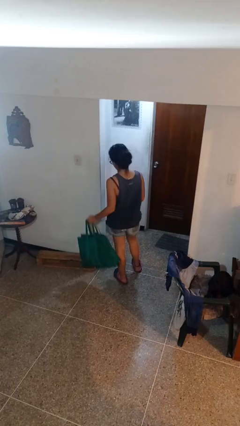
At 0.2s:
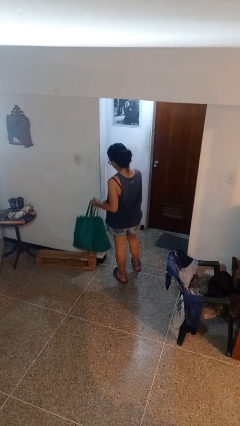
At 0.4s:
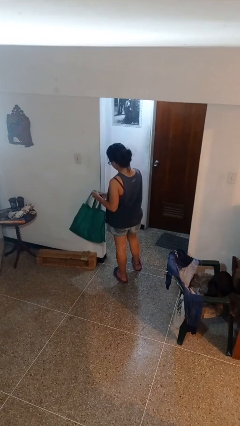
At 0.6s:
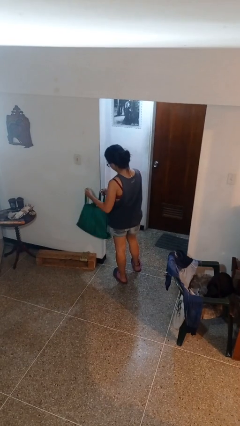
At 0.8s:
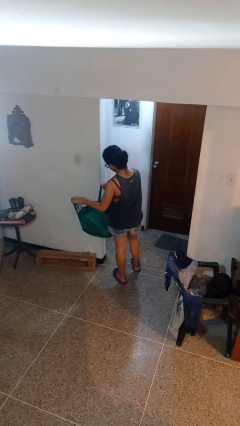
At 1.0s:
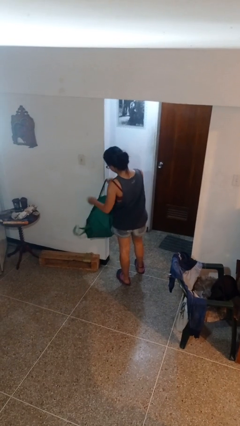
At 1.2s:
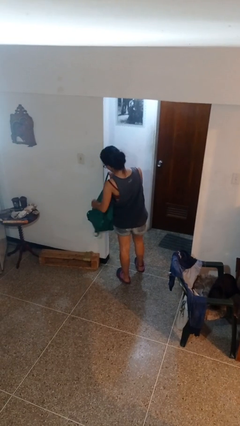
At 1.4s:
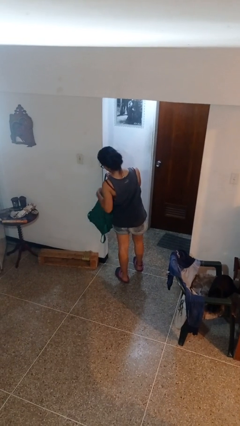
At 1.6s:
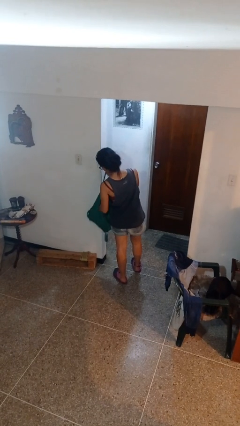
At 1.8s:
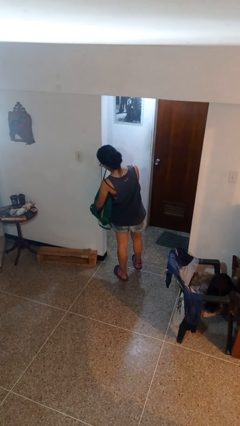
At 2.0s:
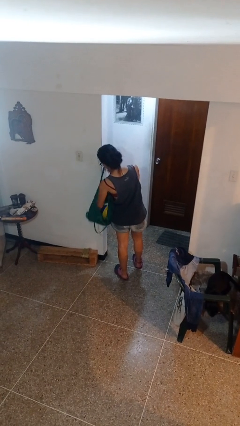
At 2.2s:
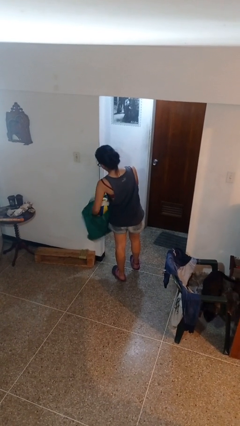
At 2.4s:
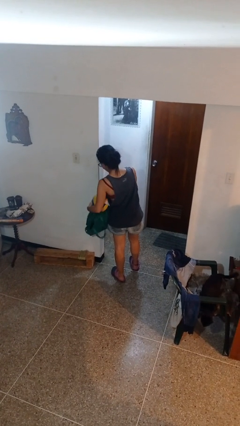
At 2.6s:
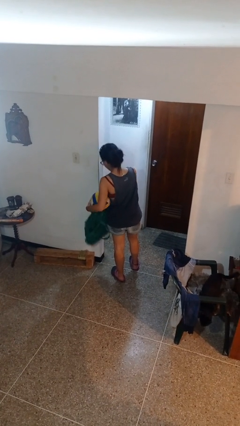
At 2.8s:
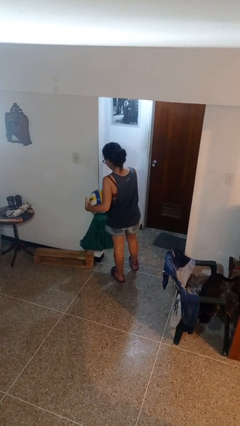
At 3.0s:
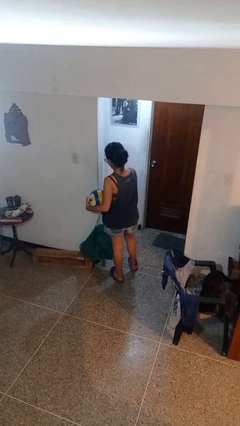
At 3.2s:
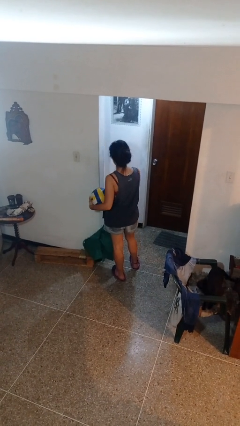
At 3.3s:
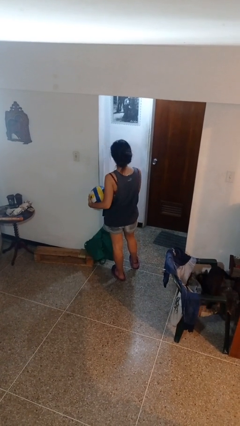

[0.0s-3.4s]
person takes object from bag

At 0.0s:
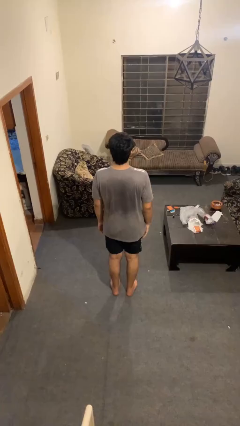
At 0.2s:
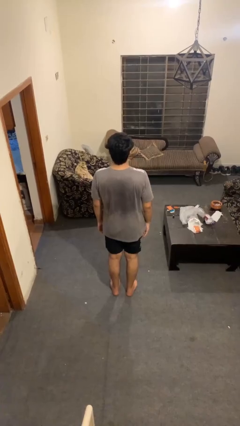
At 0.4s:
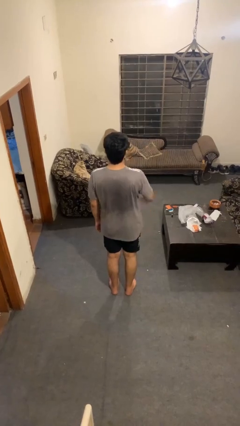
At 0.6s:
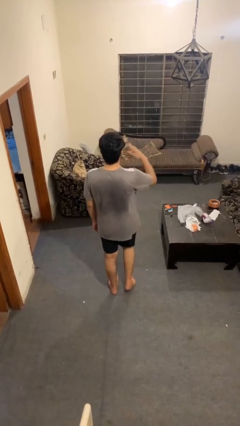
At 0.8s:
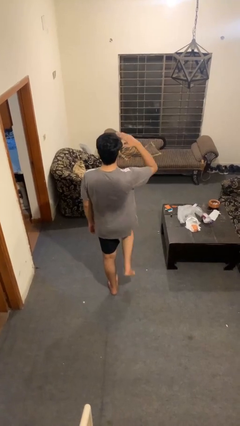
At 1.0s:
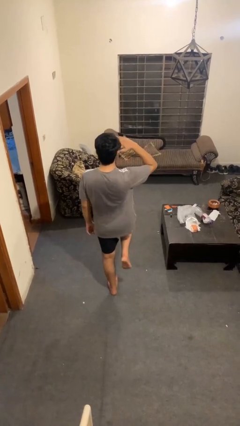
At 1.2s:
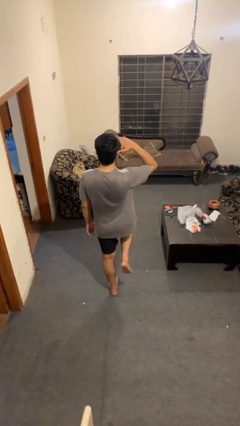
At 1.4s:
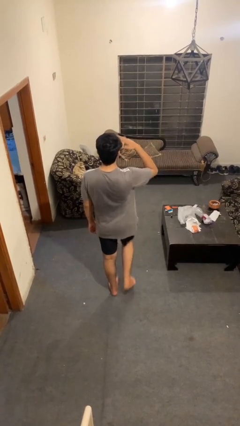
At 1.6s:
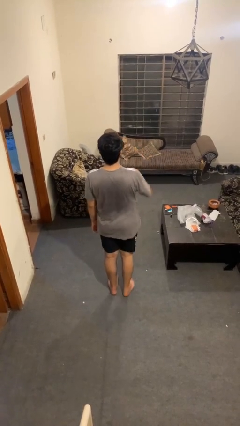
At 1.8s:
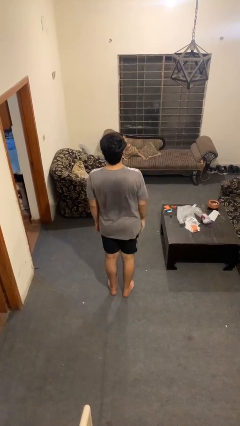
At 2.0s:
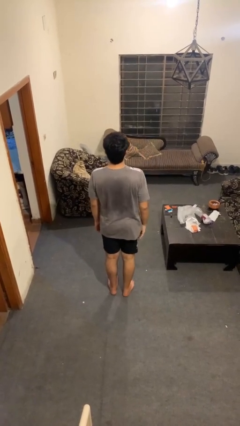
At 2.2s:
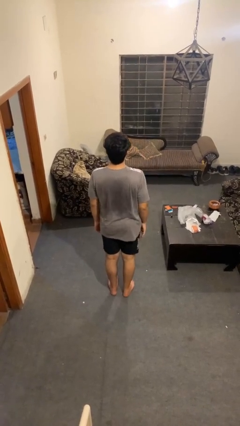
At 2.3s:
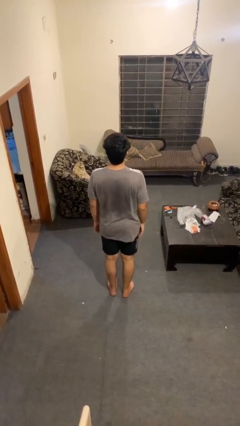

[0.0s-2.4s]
person salutes

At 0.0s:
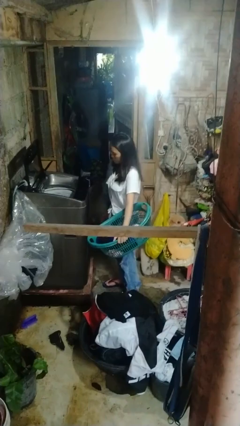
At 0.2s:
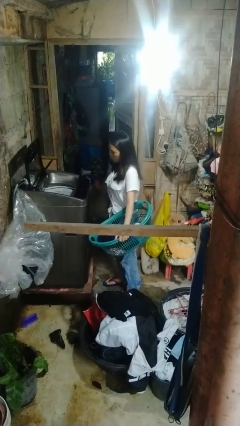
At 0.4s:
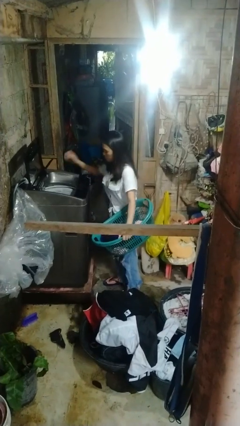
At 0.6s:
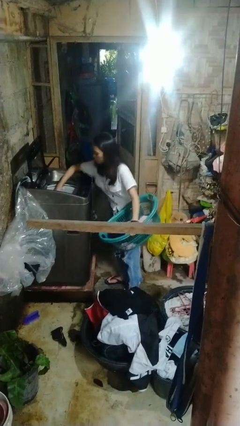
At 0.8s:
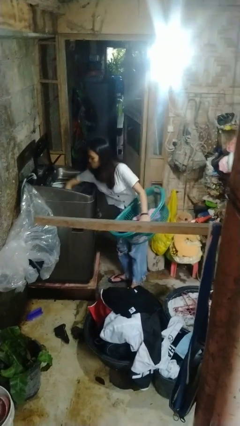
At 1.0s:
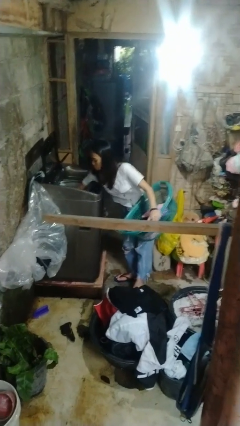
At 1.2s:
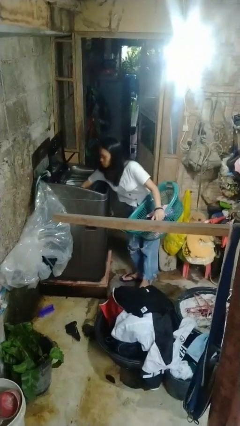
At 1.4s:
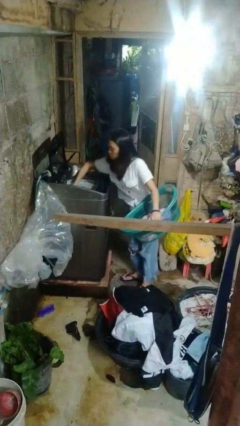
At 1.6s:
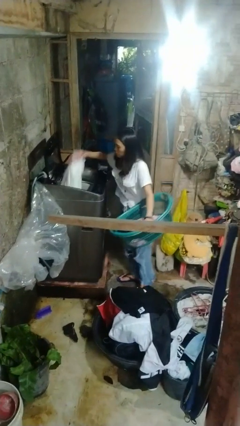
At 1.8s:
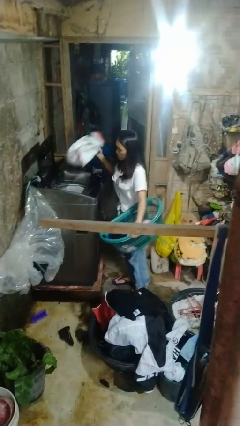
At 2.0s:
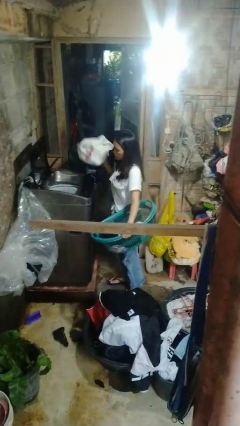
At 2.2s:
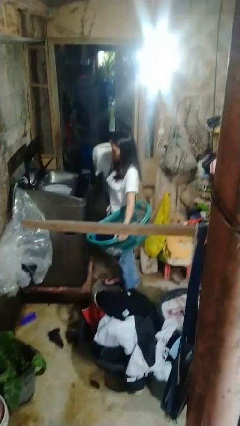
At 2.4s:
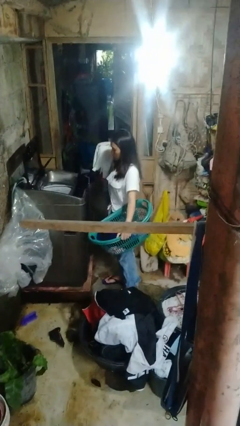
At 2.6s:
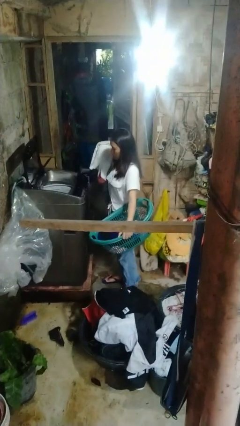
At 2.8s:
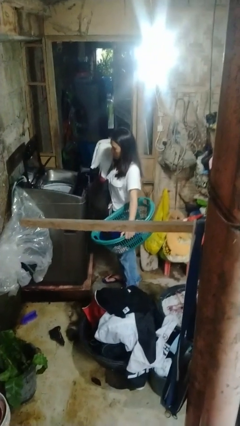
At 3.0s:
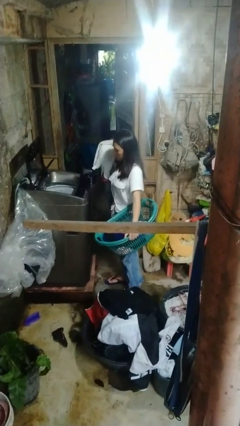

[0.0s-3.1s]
person unloads clotheswasher

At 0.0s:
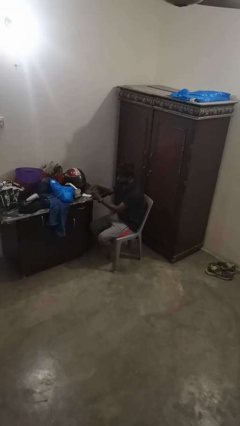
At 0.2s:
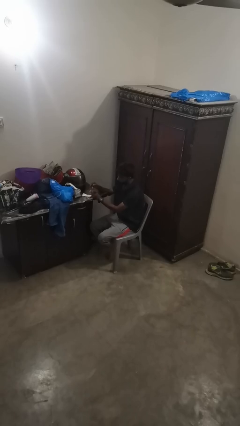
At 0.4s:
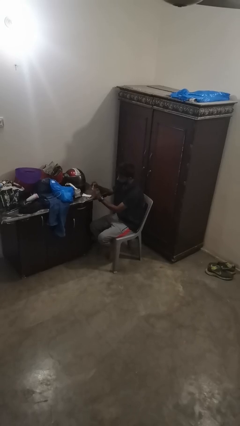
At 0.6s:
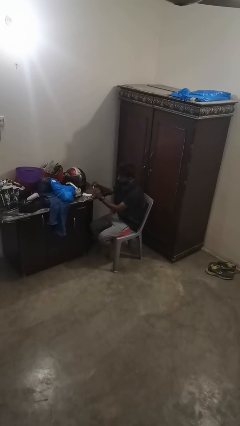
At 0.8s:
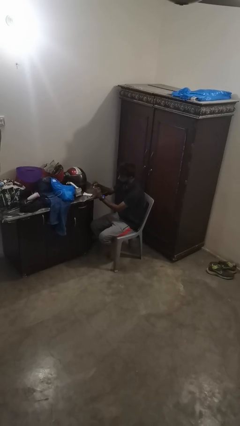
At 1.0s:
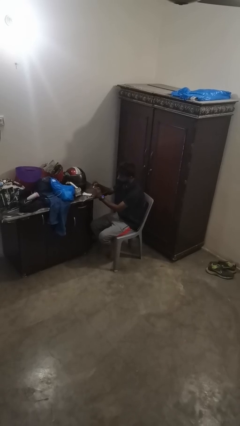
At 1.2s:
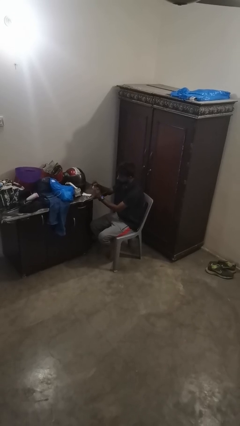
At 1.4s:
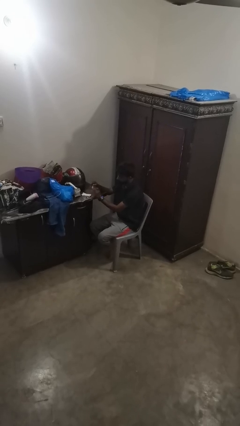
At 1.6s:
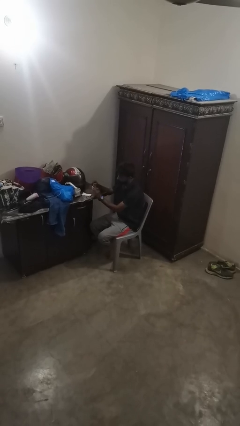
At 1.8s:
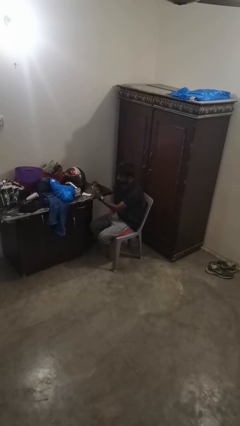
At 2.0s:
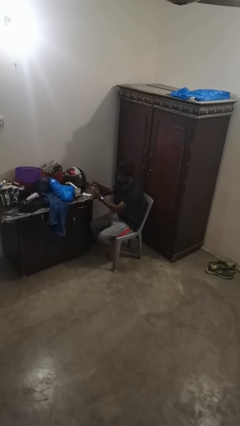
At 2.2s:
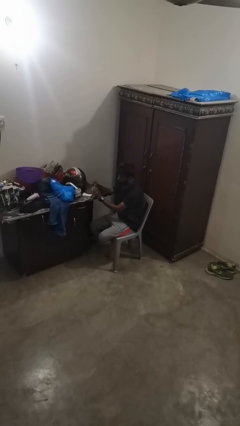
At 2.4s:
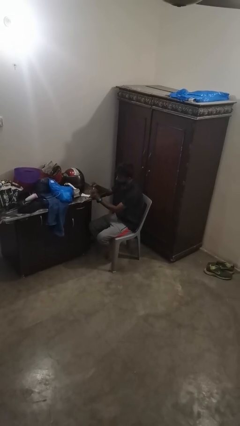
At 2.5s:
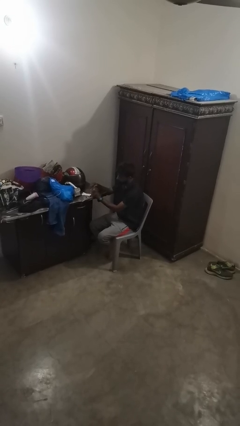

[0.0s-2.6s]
person paints fingernails

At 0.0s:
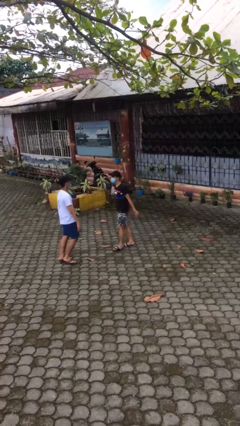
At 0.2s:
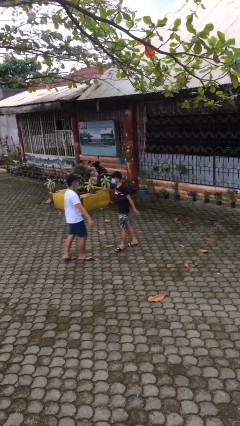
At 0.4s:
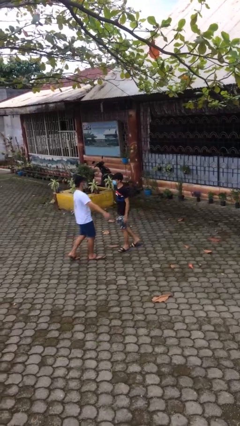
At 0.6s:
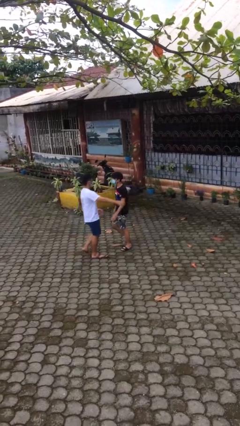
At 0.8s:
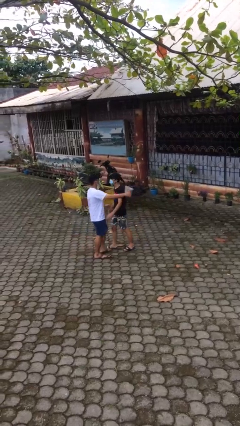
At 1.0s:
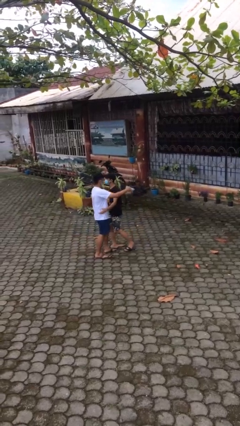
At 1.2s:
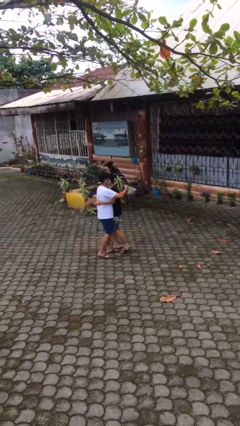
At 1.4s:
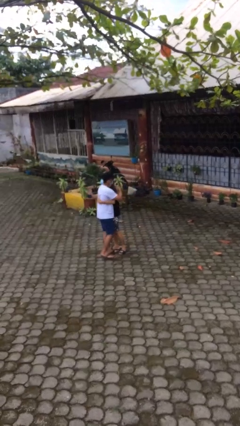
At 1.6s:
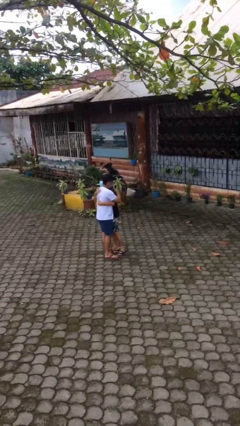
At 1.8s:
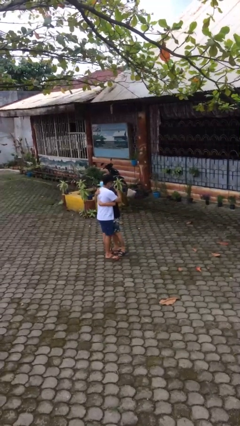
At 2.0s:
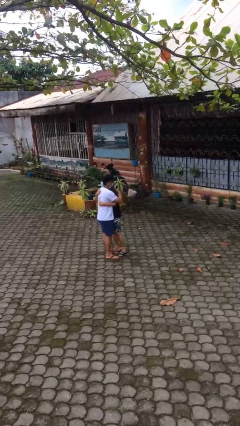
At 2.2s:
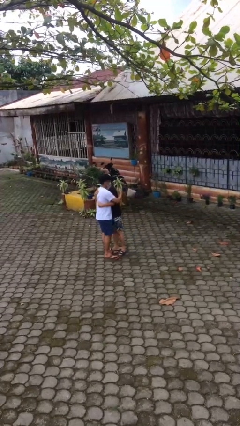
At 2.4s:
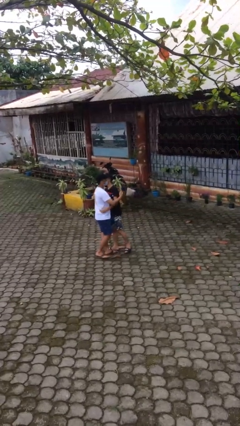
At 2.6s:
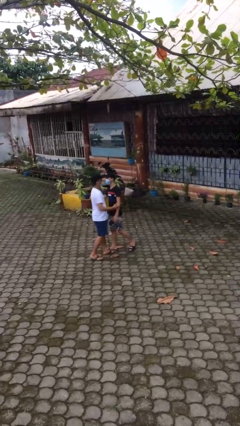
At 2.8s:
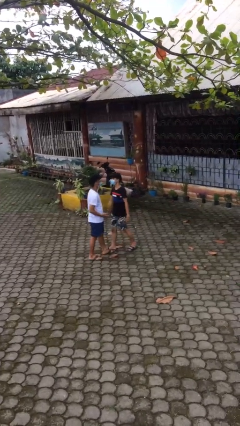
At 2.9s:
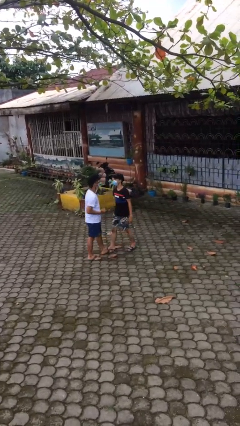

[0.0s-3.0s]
person embraces person

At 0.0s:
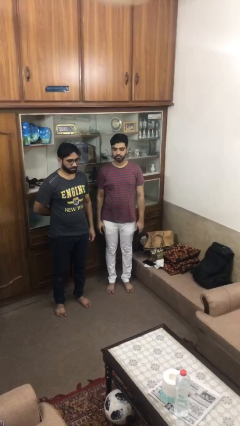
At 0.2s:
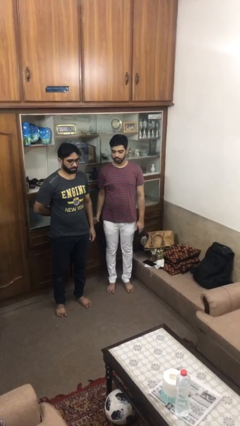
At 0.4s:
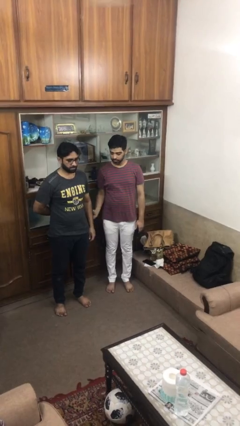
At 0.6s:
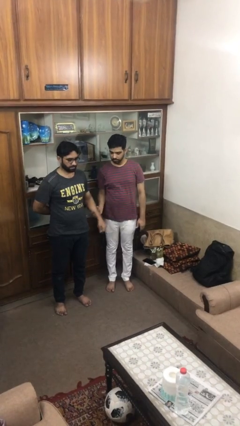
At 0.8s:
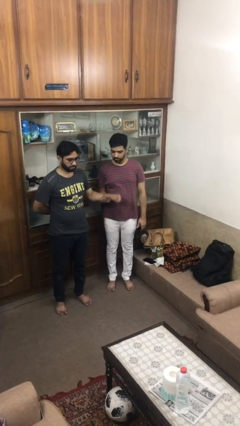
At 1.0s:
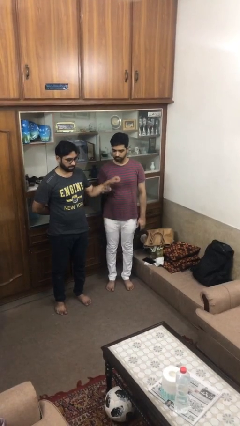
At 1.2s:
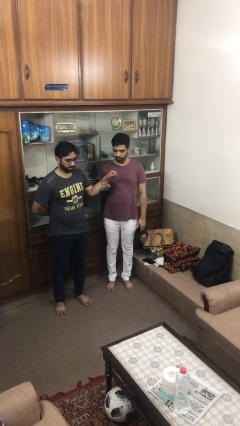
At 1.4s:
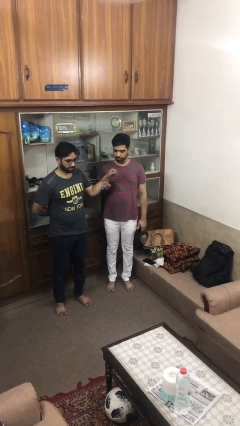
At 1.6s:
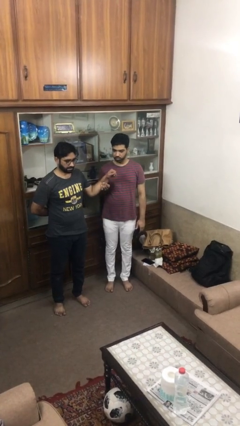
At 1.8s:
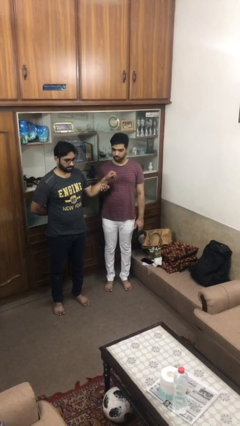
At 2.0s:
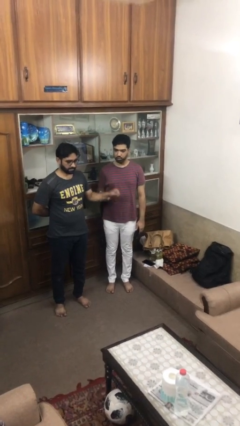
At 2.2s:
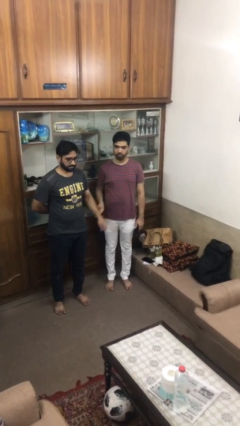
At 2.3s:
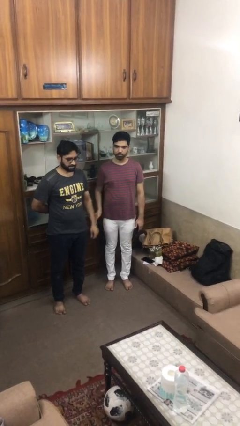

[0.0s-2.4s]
person grabs person by forearm

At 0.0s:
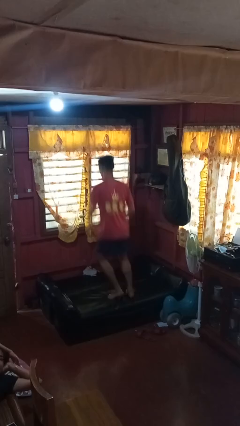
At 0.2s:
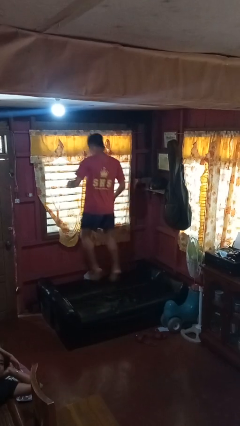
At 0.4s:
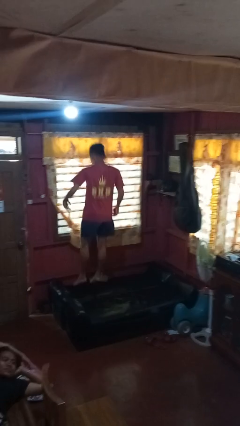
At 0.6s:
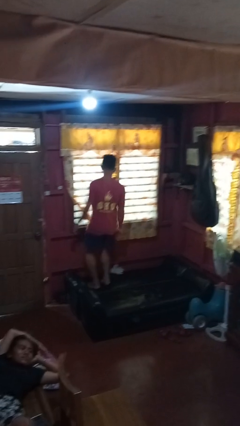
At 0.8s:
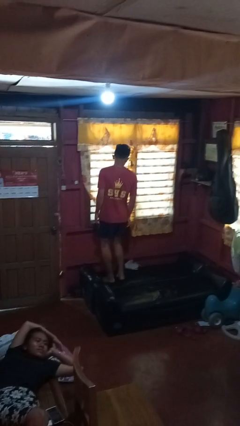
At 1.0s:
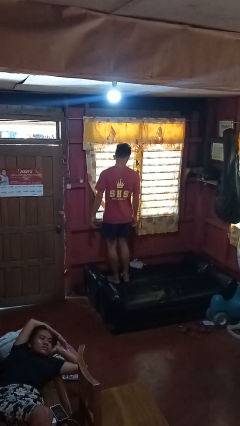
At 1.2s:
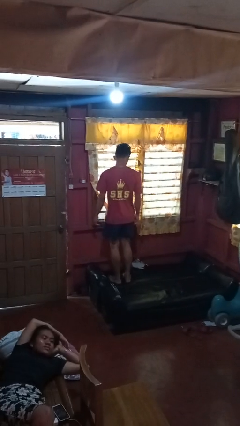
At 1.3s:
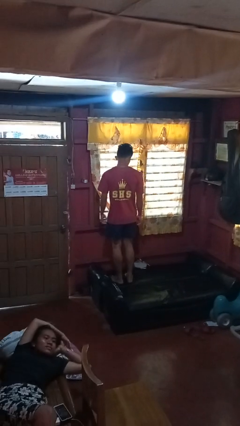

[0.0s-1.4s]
person jumps on couch
